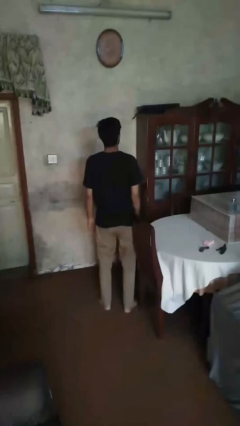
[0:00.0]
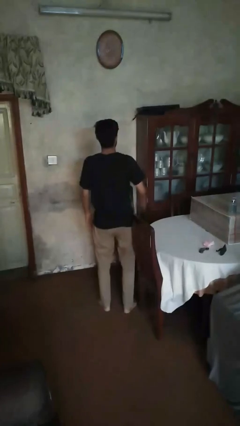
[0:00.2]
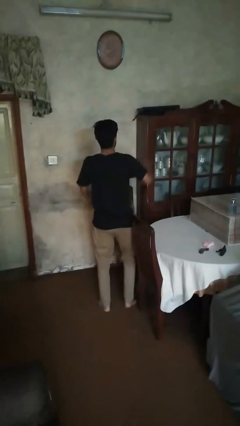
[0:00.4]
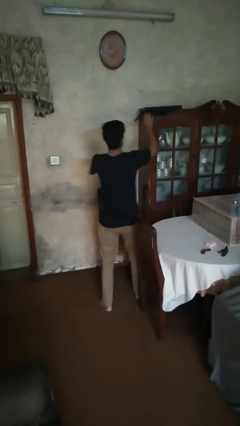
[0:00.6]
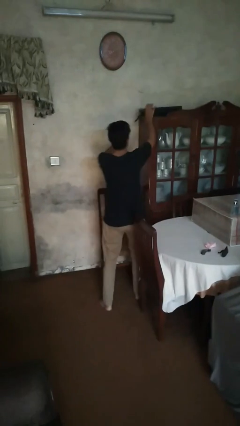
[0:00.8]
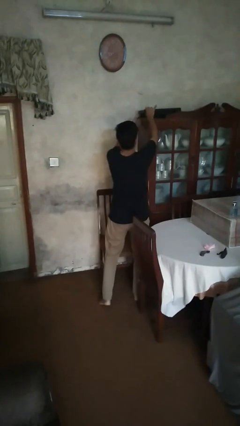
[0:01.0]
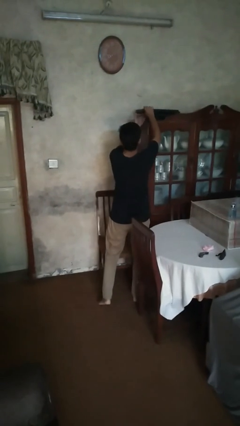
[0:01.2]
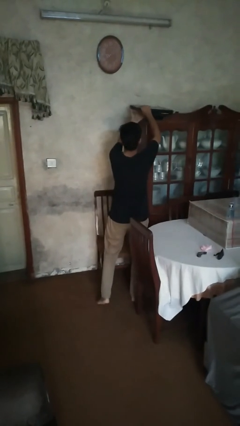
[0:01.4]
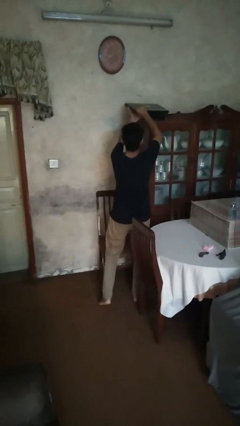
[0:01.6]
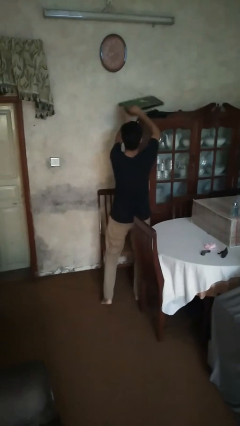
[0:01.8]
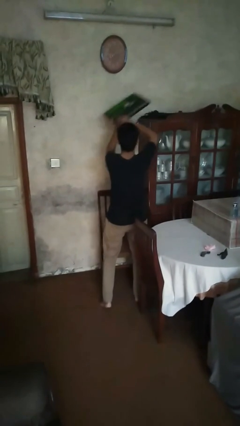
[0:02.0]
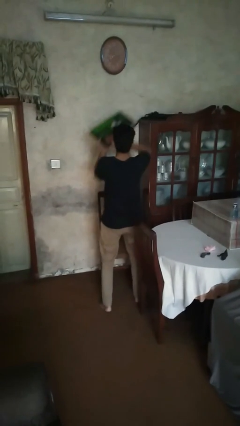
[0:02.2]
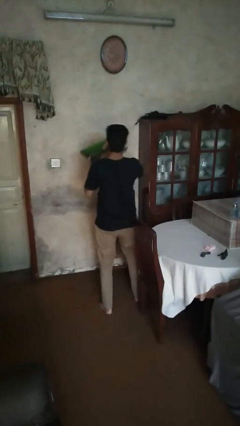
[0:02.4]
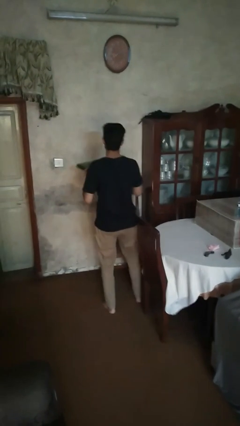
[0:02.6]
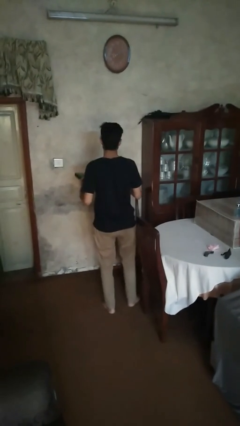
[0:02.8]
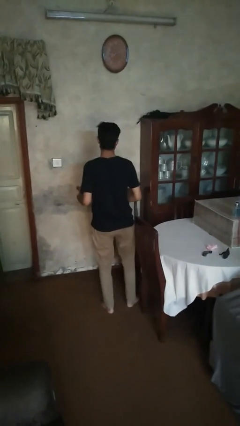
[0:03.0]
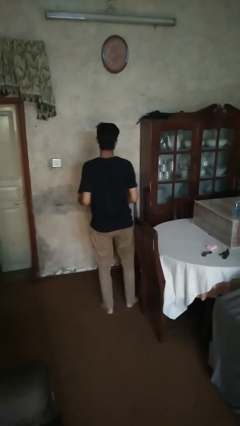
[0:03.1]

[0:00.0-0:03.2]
person picks up object from cabinet

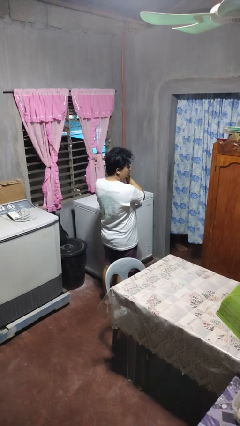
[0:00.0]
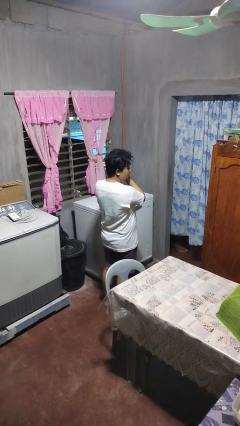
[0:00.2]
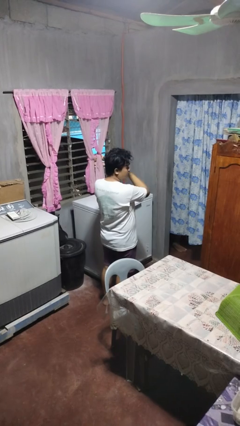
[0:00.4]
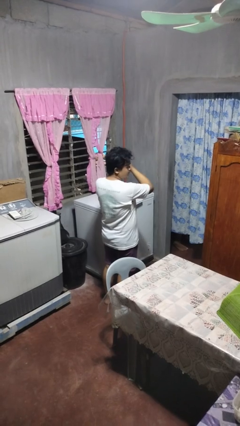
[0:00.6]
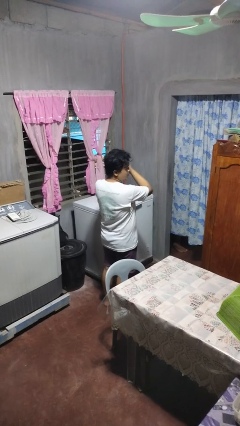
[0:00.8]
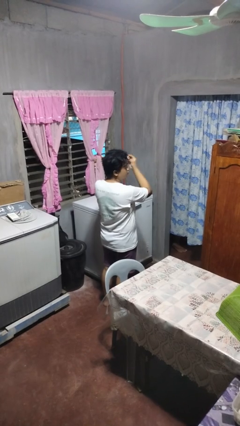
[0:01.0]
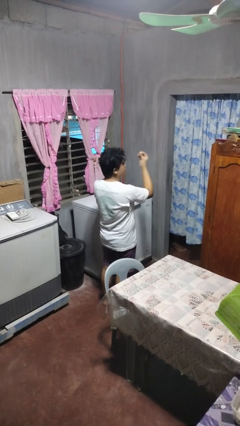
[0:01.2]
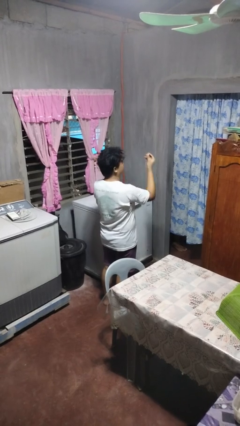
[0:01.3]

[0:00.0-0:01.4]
person takes off earrings

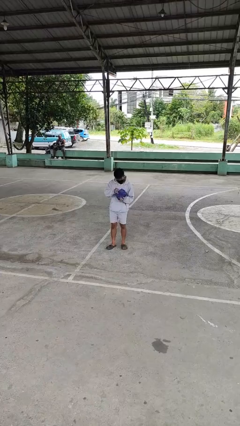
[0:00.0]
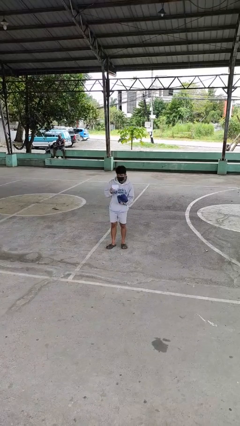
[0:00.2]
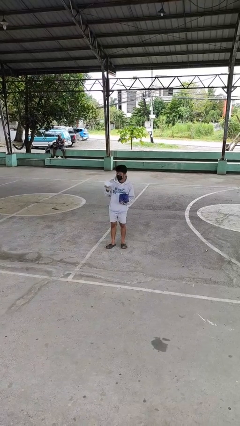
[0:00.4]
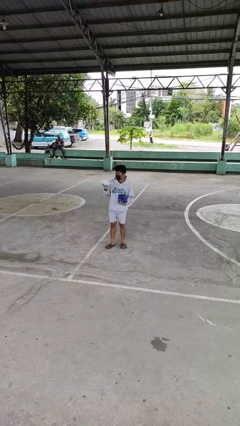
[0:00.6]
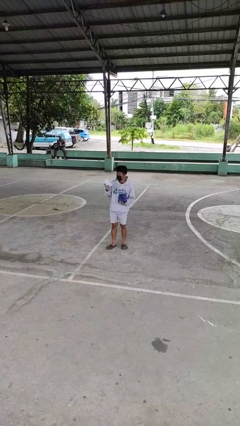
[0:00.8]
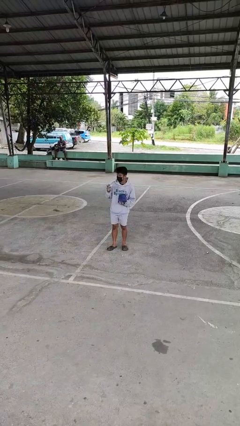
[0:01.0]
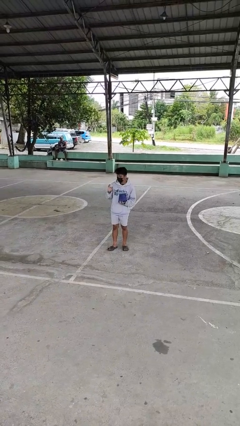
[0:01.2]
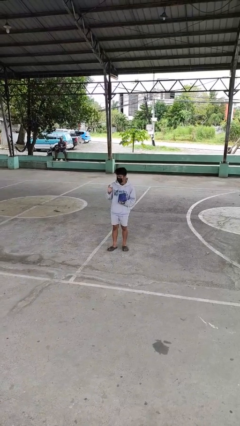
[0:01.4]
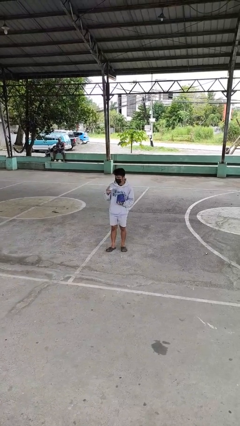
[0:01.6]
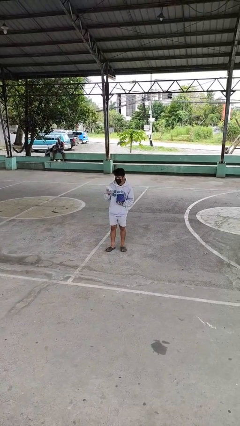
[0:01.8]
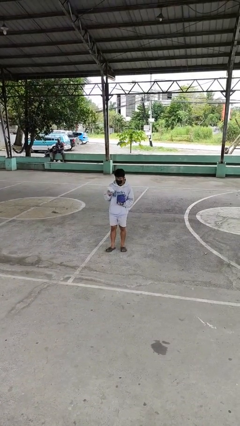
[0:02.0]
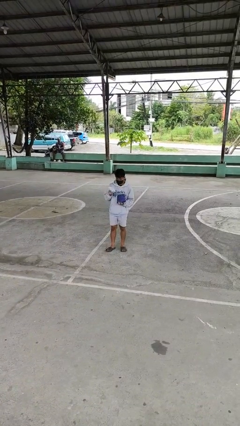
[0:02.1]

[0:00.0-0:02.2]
person takes object from purse

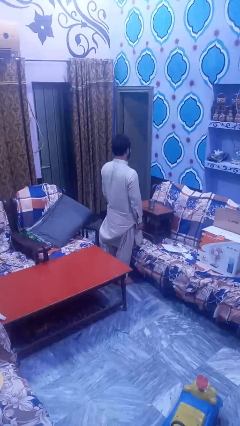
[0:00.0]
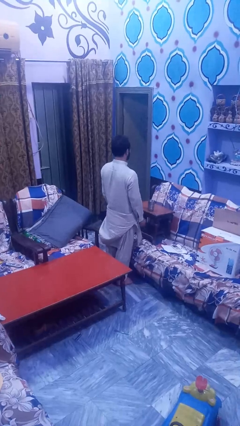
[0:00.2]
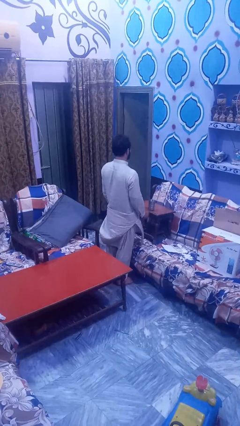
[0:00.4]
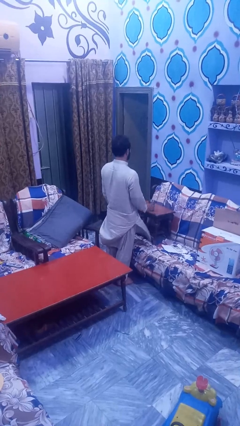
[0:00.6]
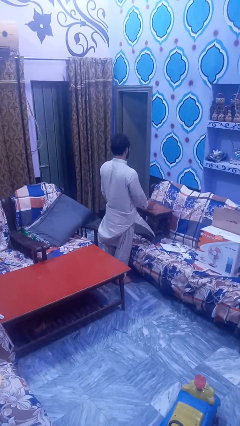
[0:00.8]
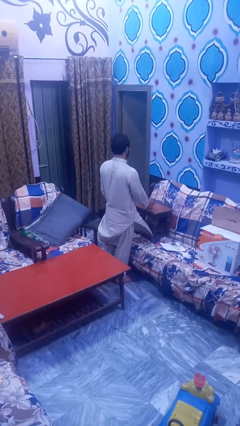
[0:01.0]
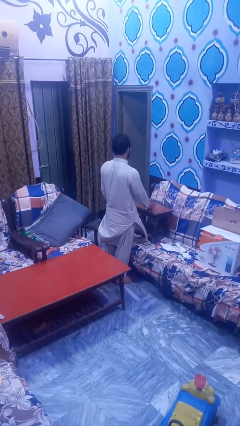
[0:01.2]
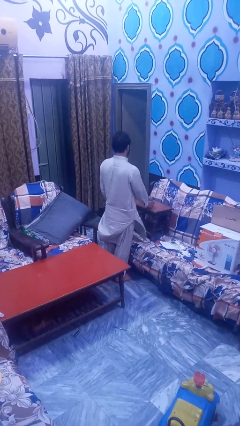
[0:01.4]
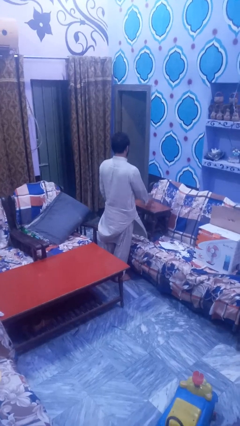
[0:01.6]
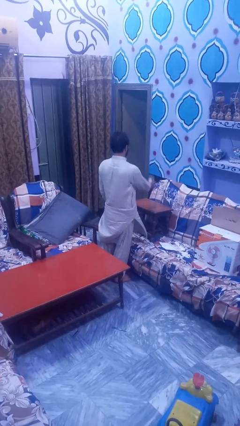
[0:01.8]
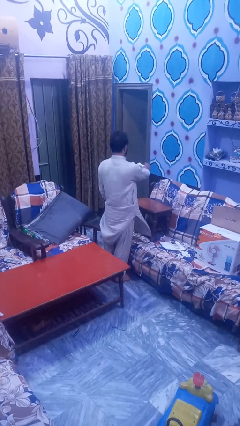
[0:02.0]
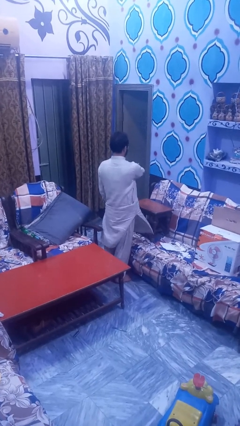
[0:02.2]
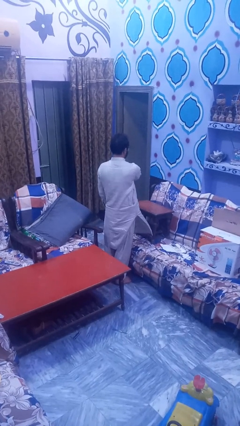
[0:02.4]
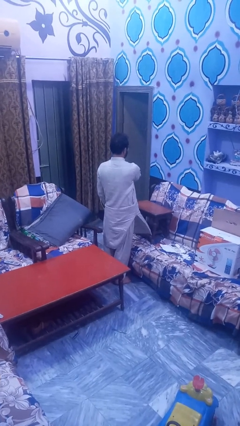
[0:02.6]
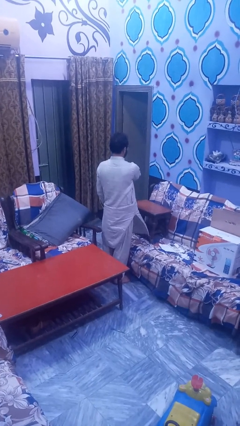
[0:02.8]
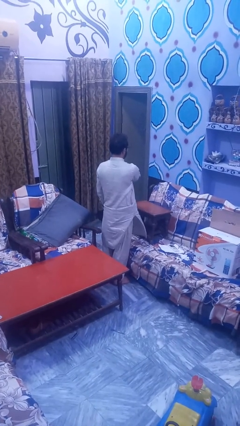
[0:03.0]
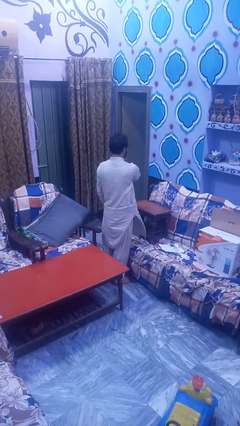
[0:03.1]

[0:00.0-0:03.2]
person spills on floor

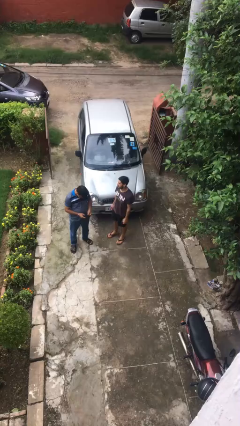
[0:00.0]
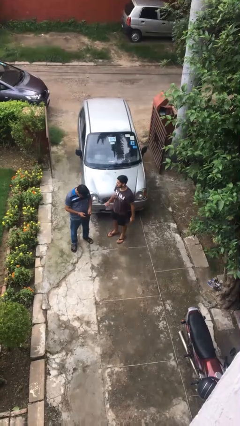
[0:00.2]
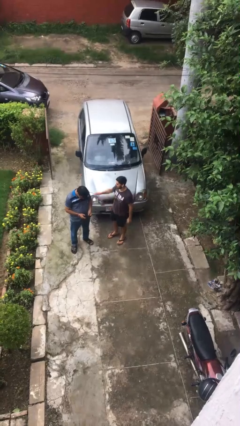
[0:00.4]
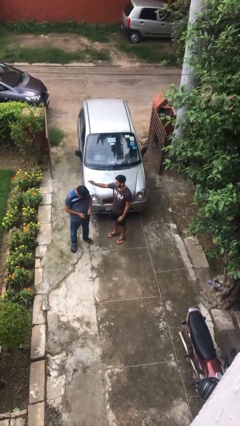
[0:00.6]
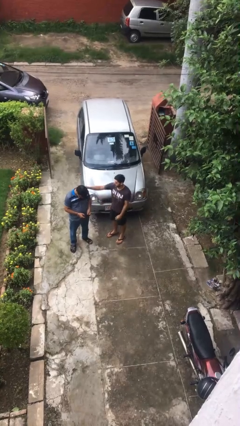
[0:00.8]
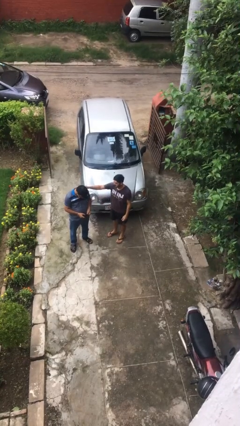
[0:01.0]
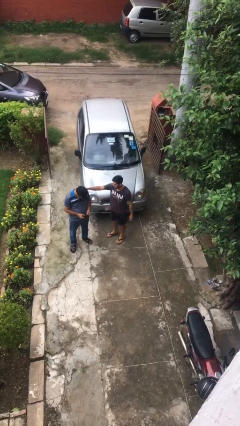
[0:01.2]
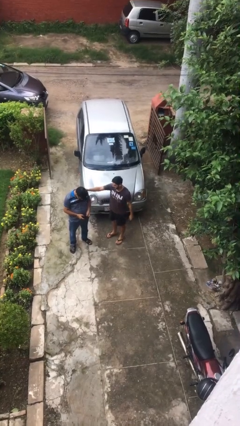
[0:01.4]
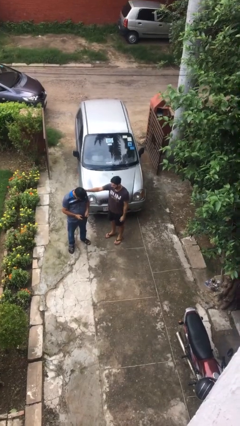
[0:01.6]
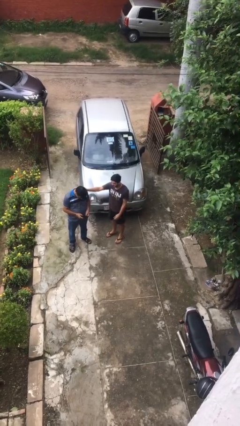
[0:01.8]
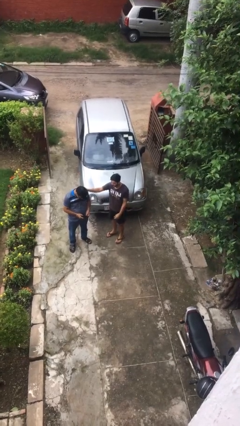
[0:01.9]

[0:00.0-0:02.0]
person pounds shoulders of person

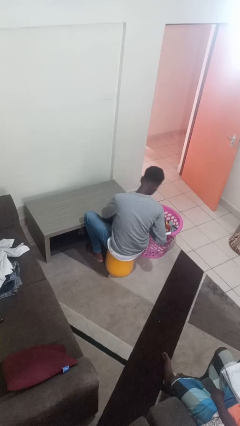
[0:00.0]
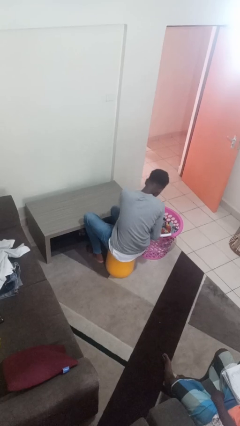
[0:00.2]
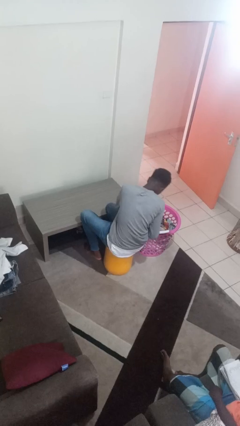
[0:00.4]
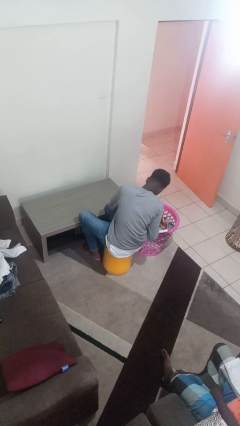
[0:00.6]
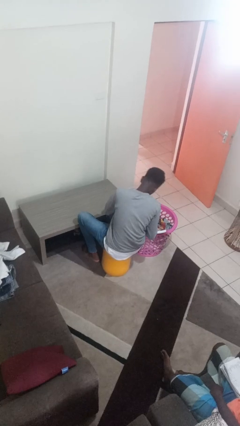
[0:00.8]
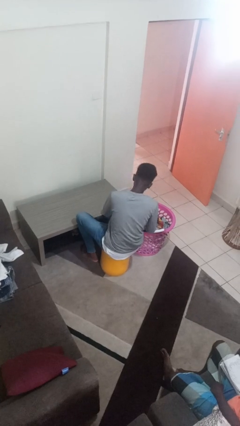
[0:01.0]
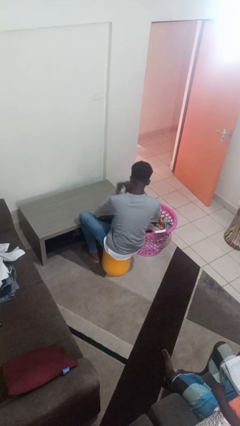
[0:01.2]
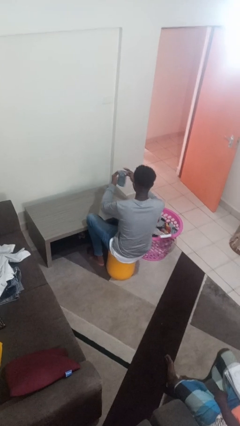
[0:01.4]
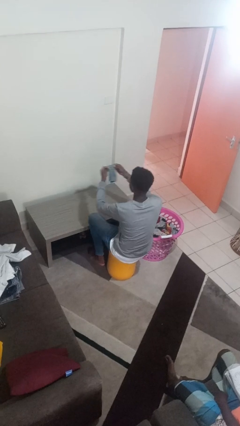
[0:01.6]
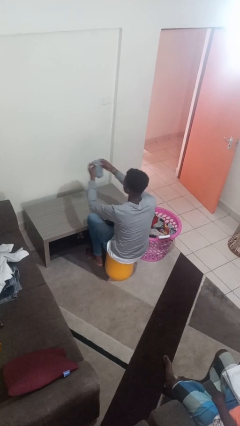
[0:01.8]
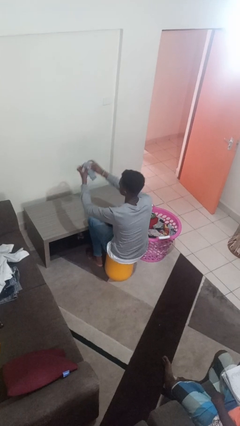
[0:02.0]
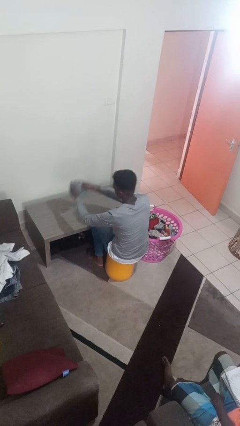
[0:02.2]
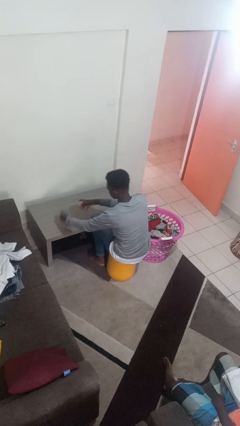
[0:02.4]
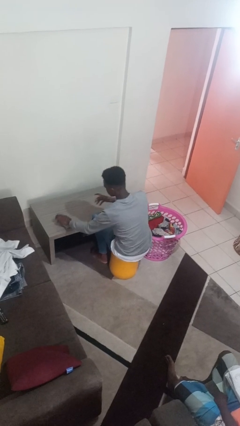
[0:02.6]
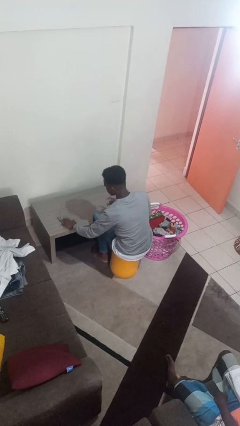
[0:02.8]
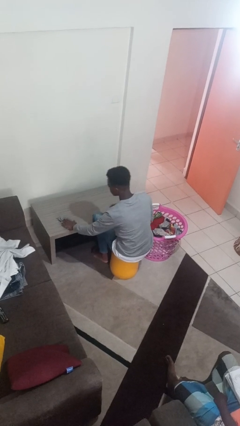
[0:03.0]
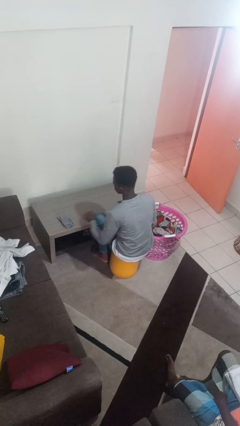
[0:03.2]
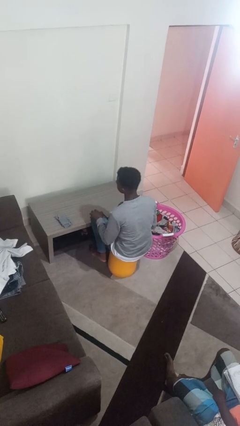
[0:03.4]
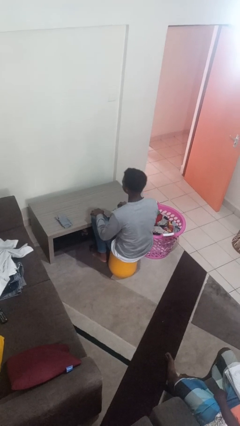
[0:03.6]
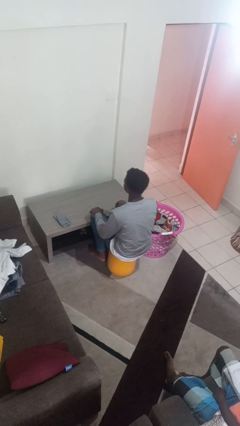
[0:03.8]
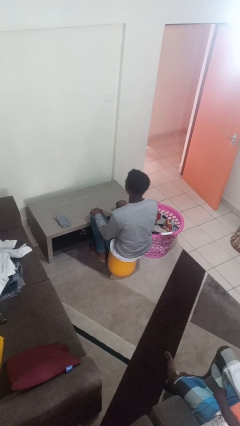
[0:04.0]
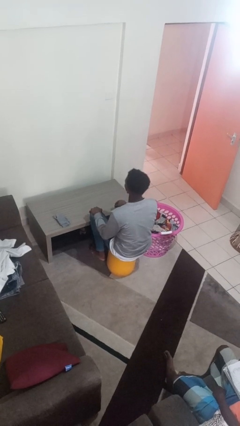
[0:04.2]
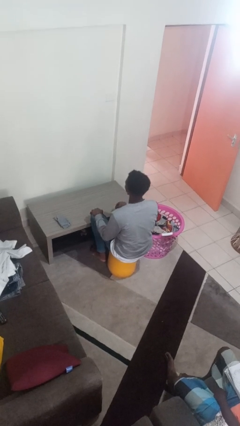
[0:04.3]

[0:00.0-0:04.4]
person folds socks

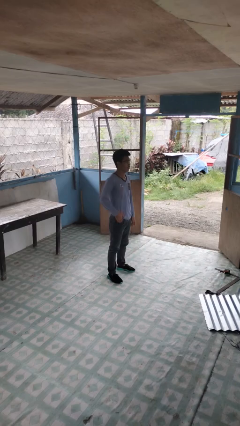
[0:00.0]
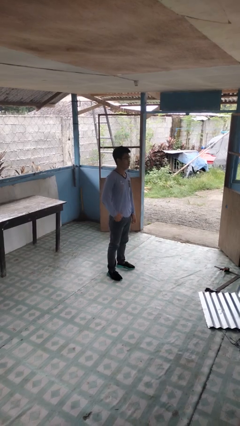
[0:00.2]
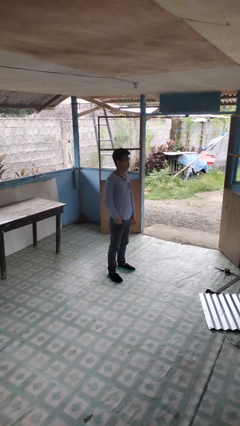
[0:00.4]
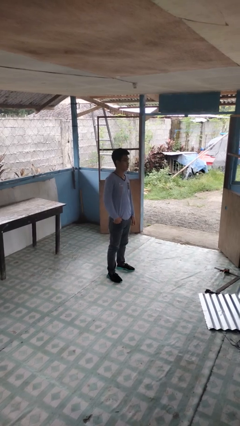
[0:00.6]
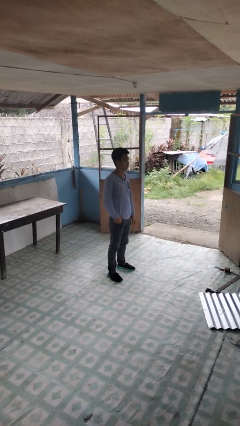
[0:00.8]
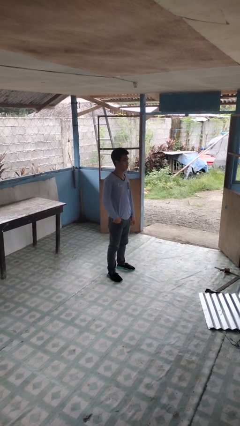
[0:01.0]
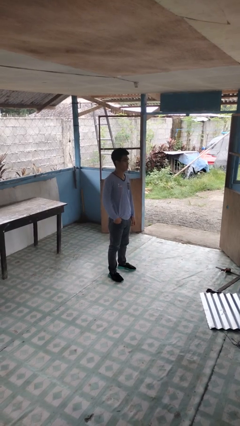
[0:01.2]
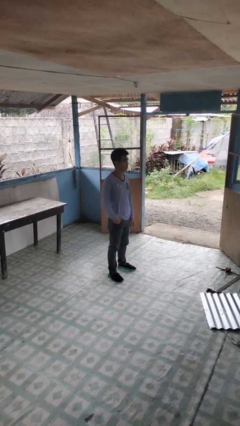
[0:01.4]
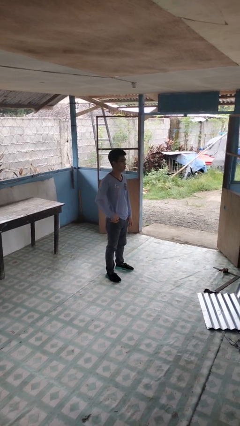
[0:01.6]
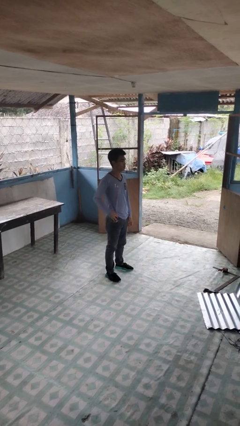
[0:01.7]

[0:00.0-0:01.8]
person puts hands in back pockets
